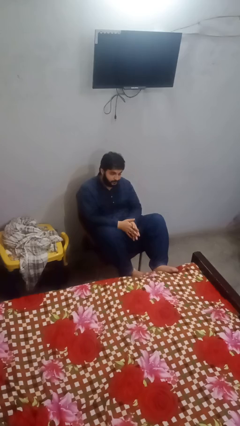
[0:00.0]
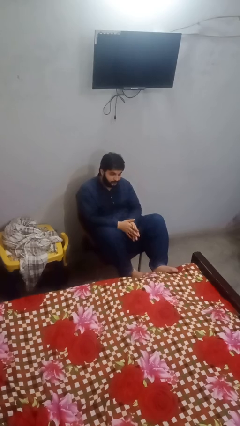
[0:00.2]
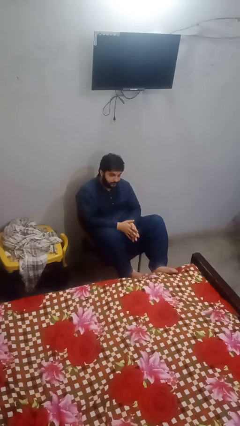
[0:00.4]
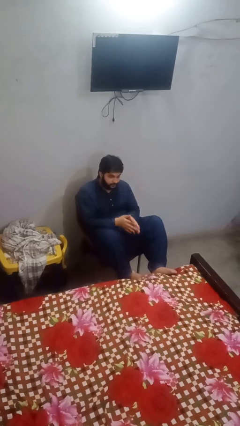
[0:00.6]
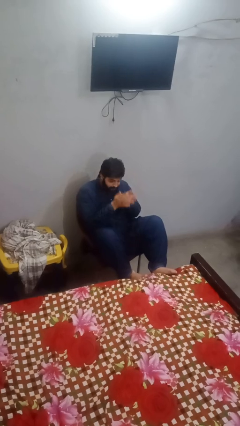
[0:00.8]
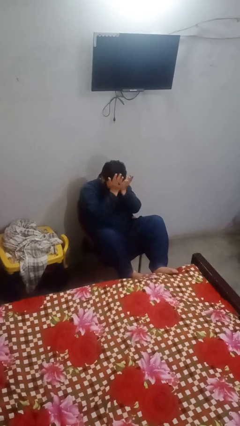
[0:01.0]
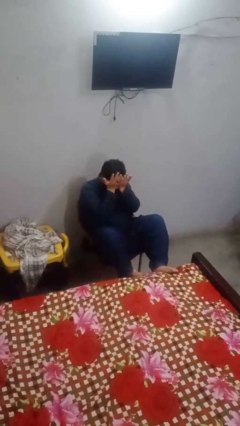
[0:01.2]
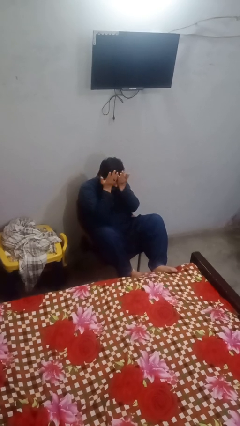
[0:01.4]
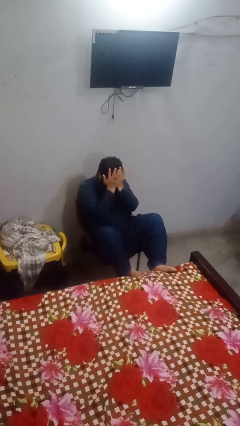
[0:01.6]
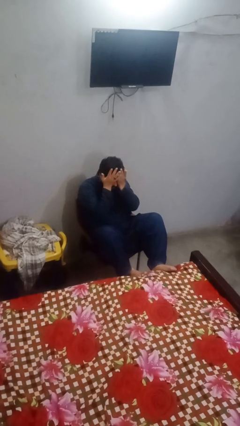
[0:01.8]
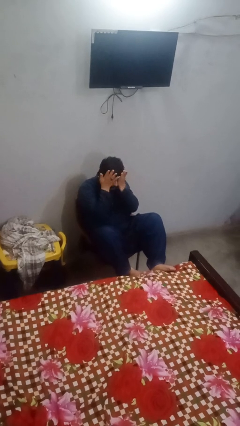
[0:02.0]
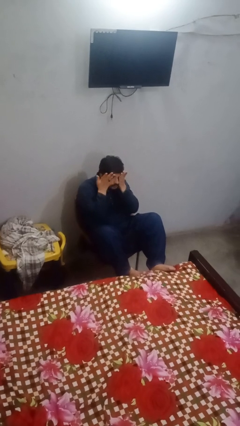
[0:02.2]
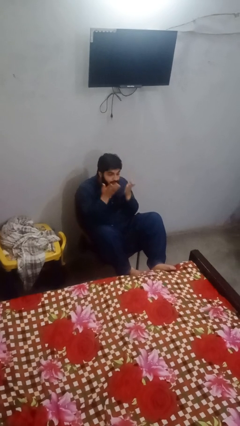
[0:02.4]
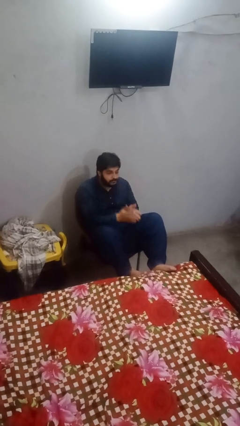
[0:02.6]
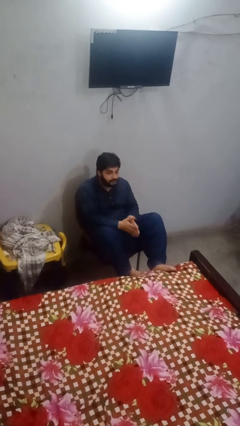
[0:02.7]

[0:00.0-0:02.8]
person rubs eyes

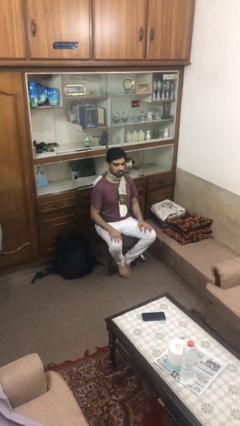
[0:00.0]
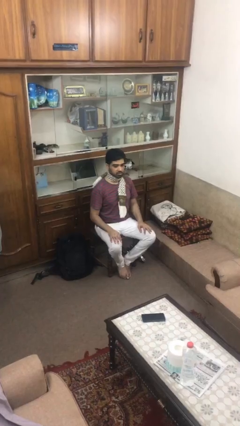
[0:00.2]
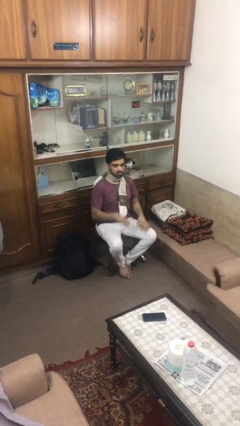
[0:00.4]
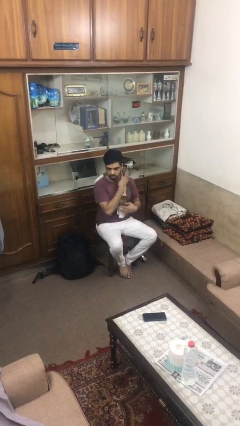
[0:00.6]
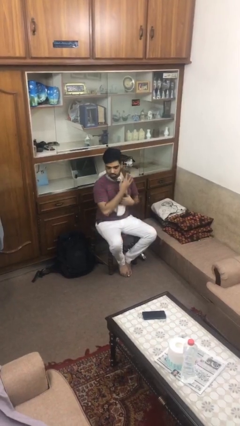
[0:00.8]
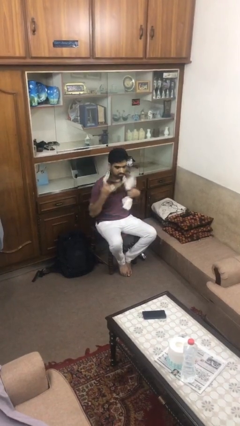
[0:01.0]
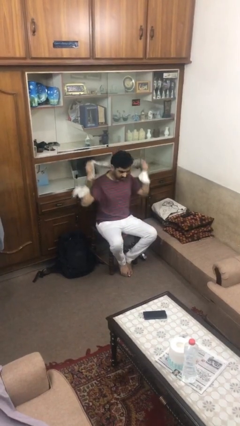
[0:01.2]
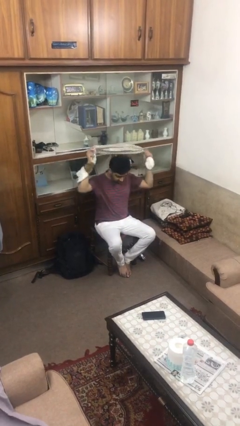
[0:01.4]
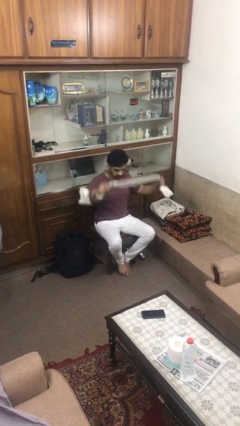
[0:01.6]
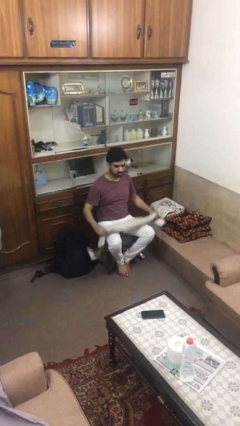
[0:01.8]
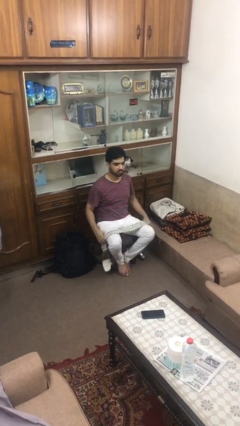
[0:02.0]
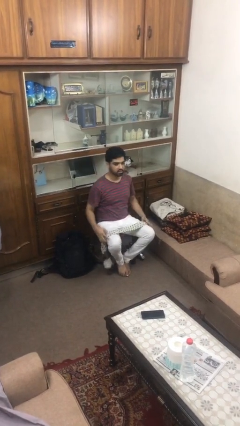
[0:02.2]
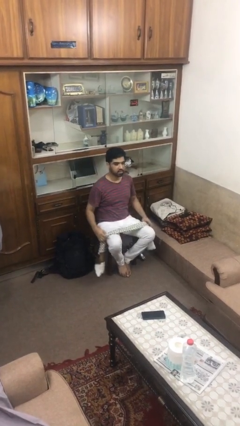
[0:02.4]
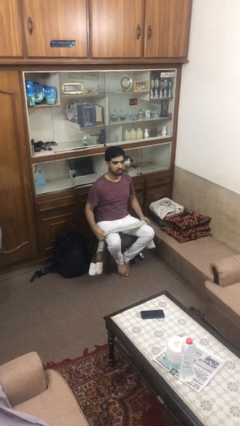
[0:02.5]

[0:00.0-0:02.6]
person takes off scarf

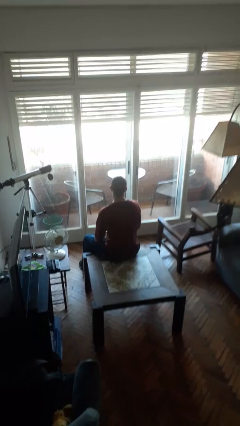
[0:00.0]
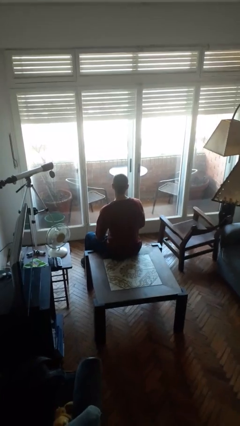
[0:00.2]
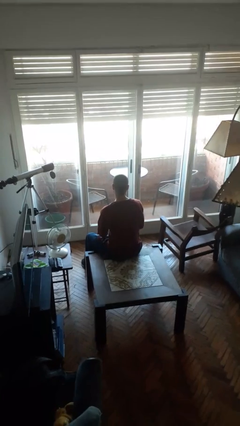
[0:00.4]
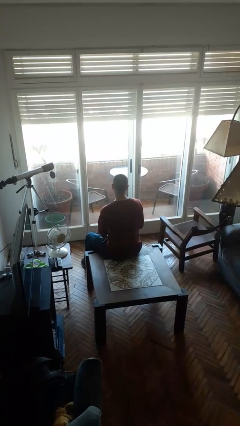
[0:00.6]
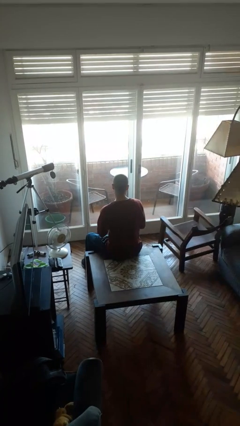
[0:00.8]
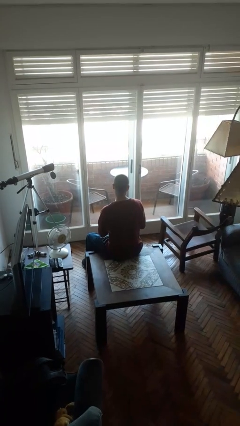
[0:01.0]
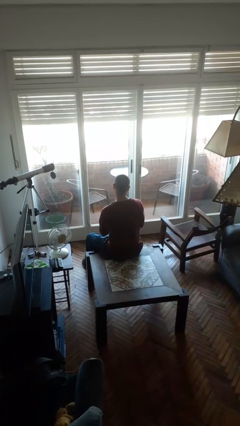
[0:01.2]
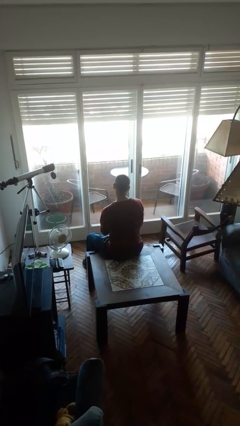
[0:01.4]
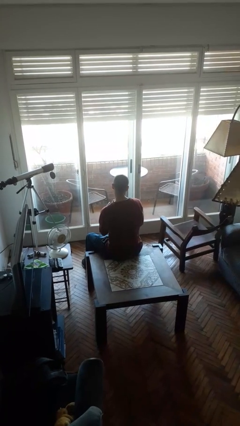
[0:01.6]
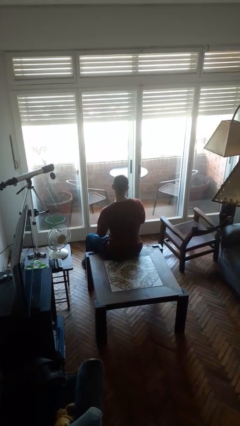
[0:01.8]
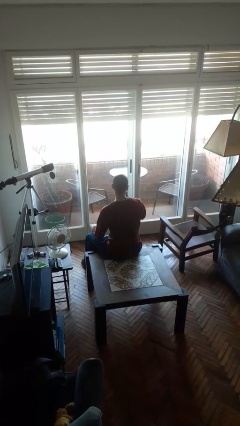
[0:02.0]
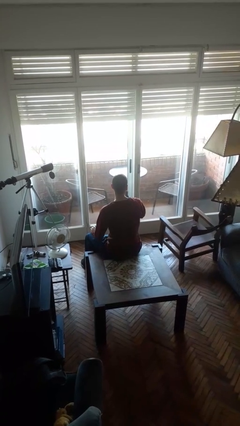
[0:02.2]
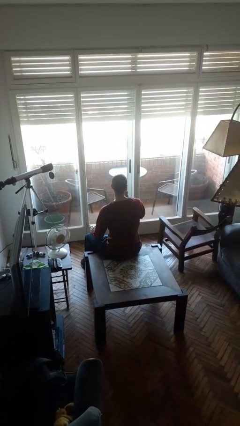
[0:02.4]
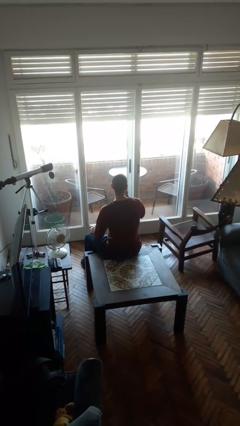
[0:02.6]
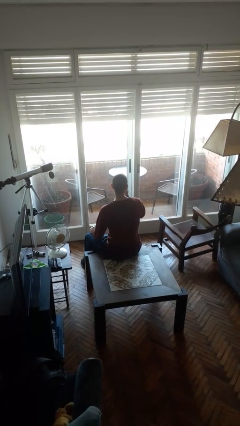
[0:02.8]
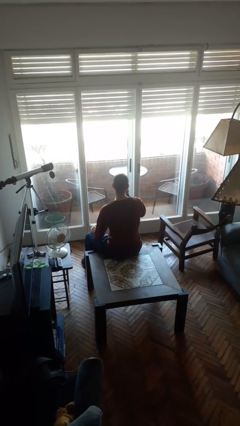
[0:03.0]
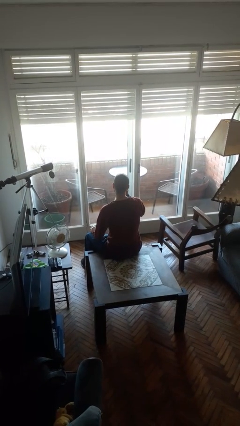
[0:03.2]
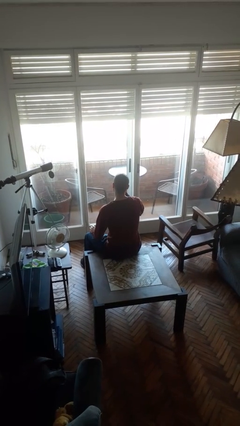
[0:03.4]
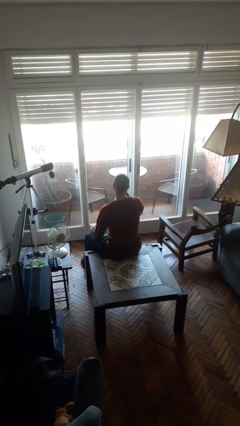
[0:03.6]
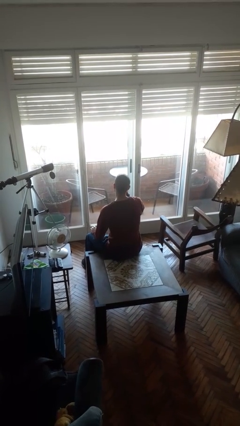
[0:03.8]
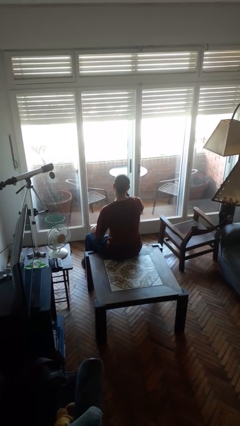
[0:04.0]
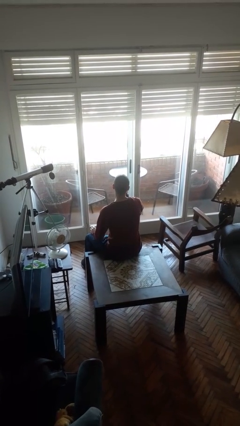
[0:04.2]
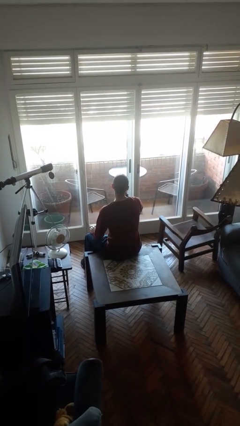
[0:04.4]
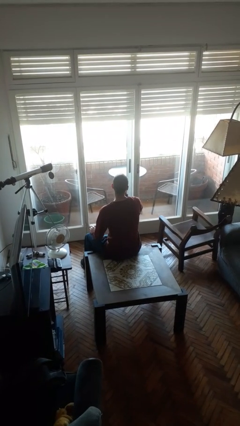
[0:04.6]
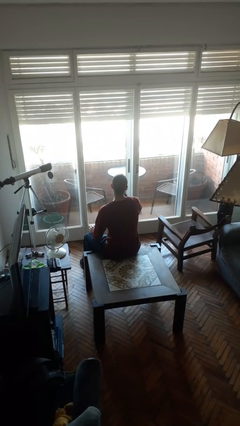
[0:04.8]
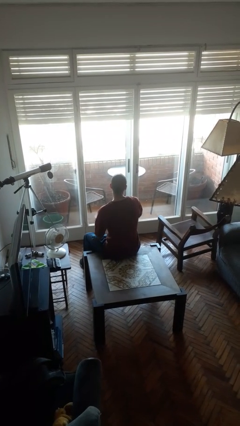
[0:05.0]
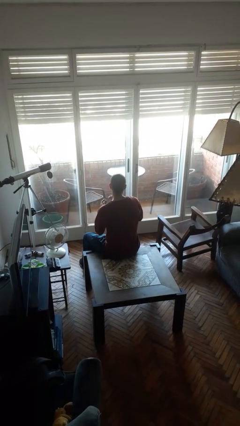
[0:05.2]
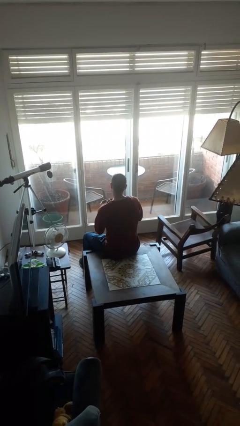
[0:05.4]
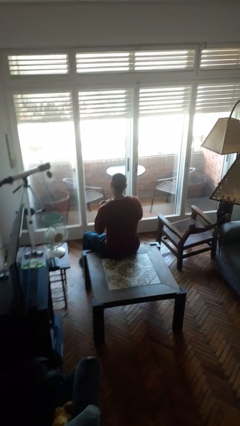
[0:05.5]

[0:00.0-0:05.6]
person applies lip makeup

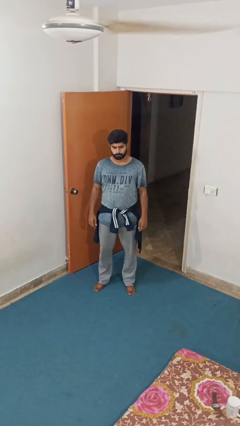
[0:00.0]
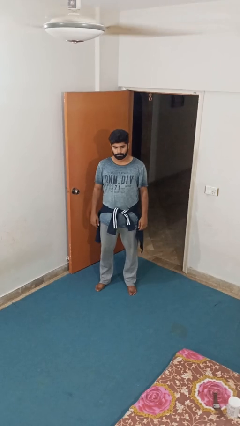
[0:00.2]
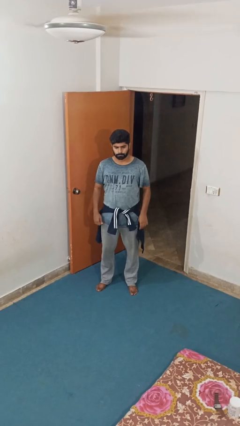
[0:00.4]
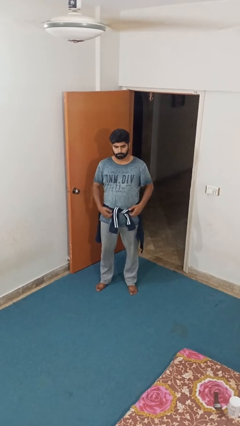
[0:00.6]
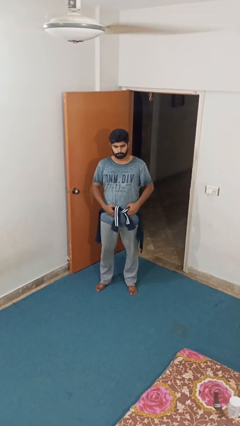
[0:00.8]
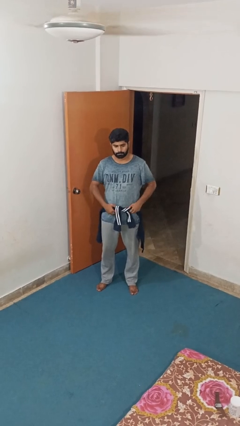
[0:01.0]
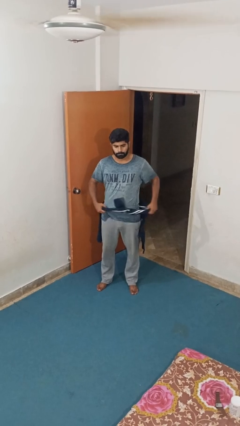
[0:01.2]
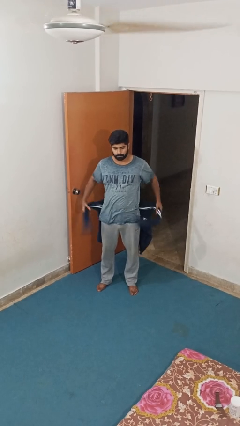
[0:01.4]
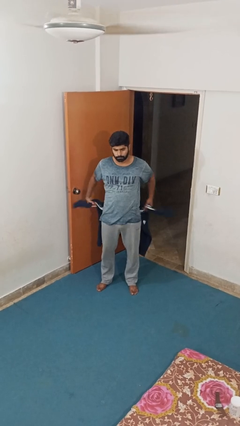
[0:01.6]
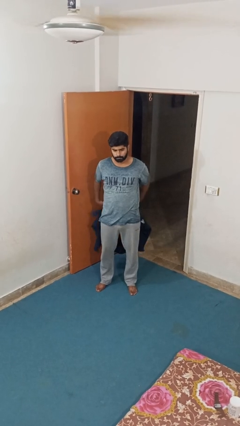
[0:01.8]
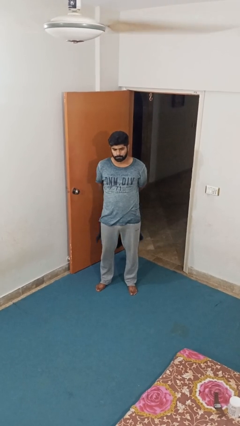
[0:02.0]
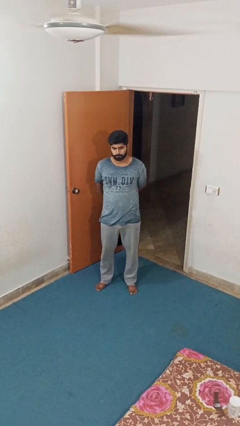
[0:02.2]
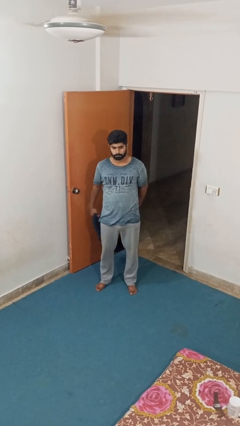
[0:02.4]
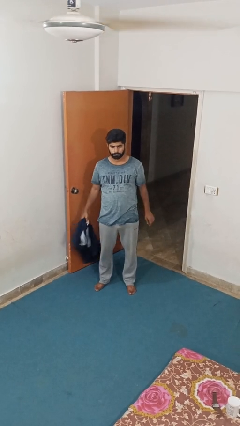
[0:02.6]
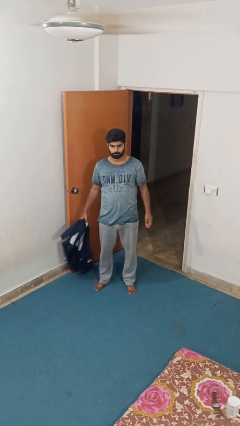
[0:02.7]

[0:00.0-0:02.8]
person unties jacket around waist

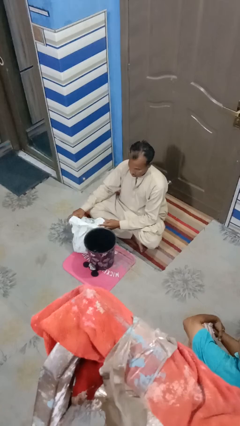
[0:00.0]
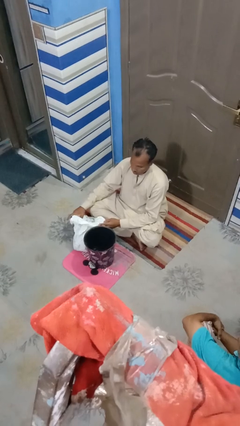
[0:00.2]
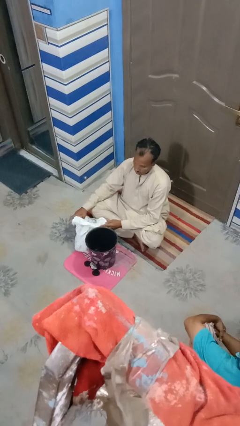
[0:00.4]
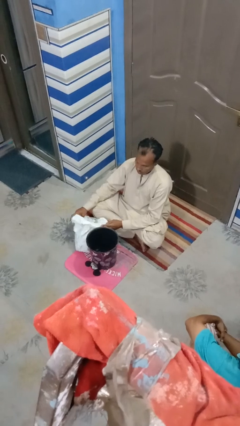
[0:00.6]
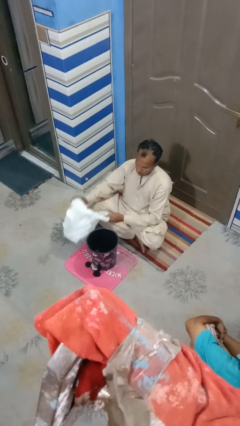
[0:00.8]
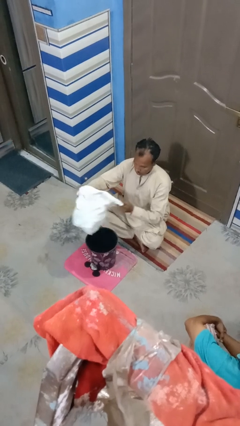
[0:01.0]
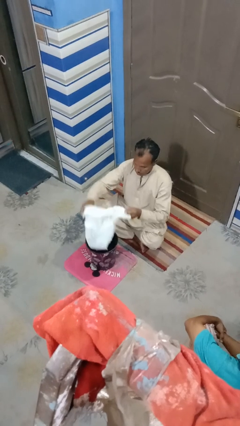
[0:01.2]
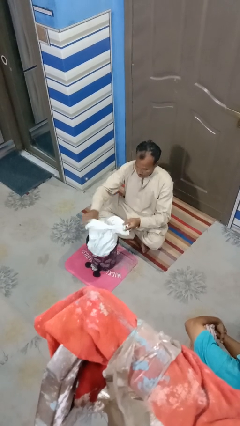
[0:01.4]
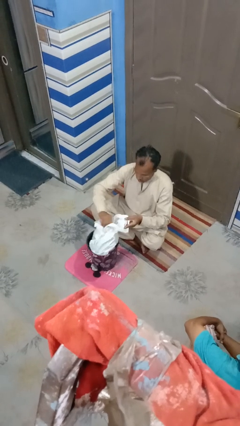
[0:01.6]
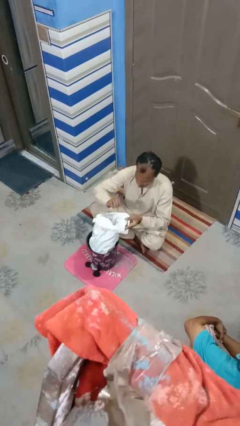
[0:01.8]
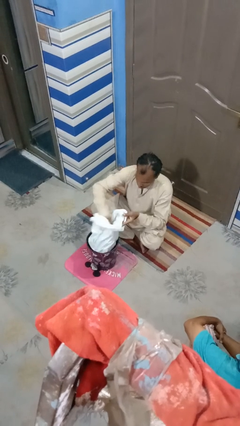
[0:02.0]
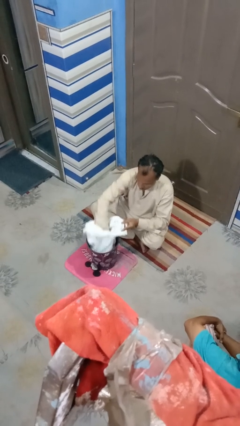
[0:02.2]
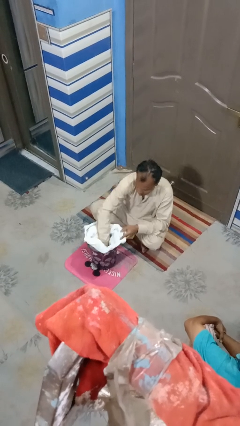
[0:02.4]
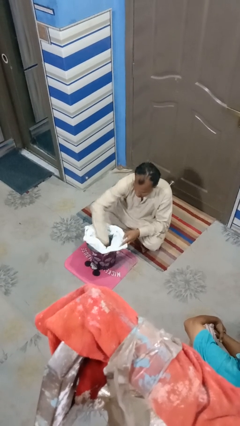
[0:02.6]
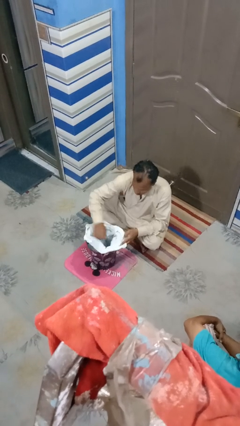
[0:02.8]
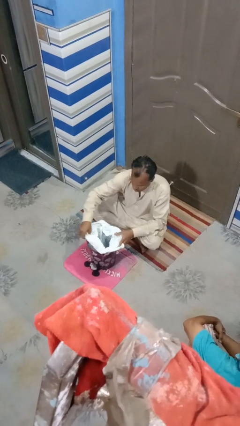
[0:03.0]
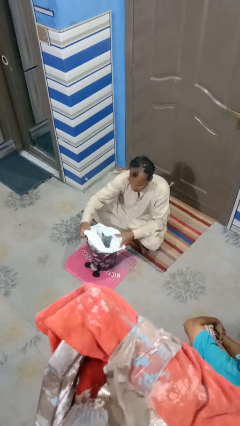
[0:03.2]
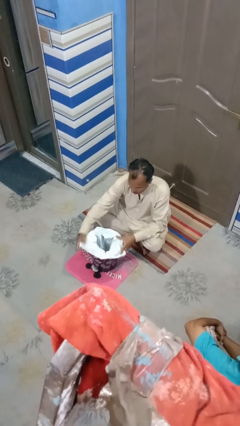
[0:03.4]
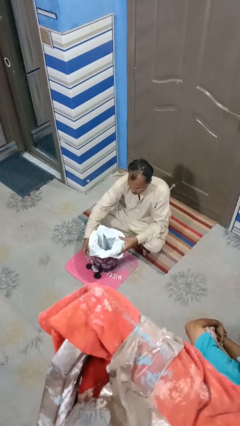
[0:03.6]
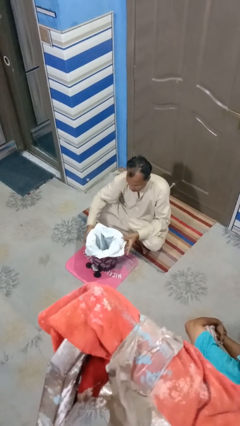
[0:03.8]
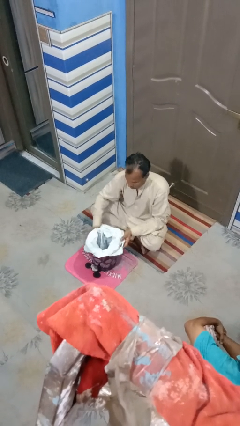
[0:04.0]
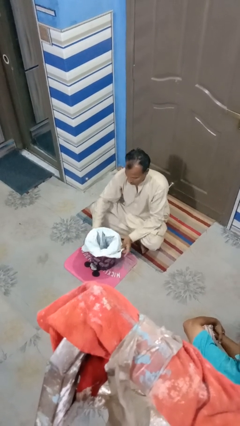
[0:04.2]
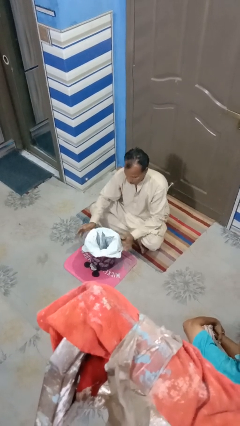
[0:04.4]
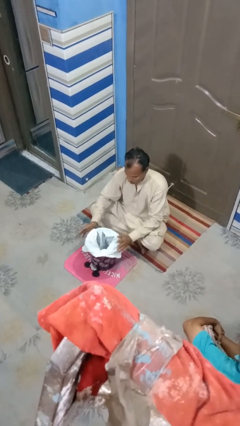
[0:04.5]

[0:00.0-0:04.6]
person removes trashbag from trashcan
